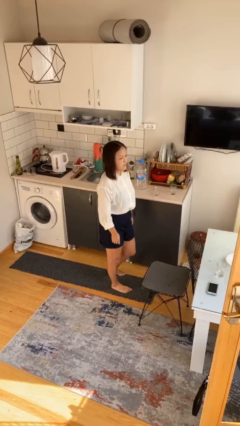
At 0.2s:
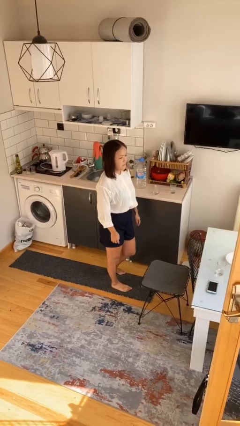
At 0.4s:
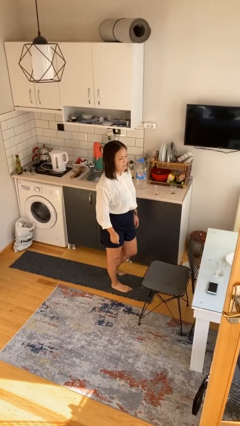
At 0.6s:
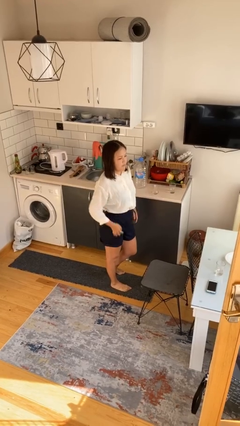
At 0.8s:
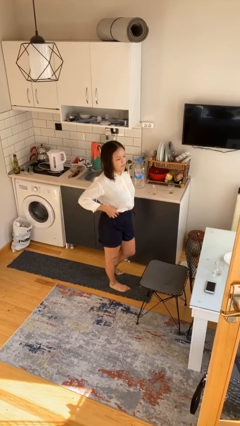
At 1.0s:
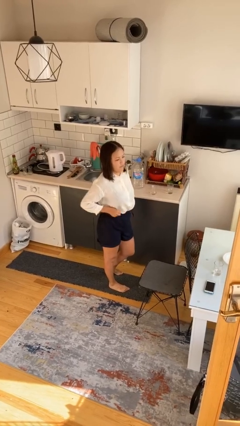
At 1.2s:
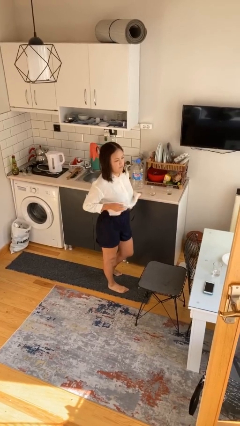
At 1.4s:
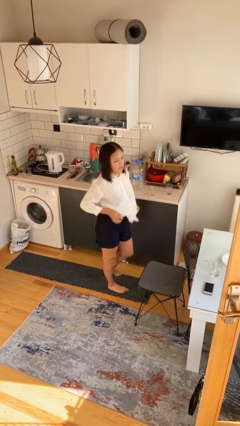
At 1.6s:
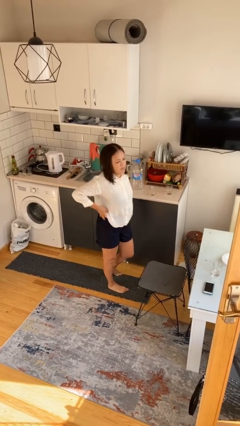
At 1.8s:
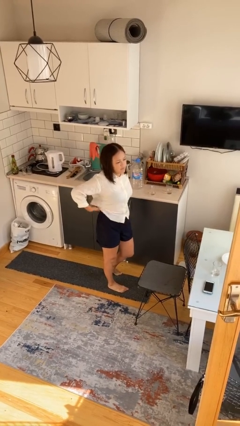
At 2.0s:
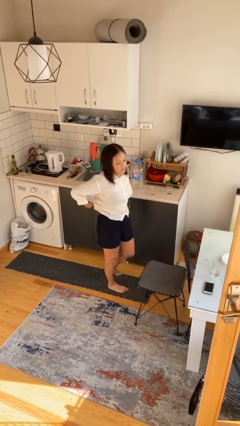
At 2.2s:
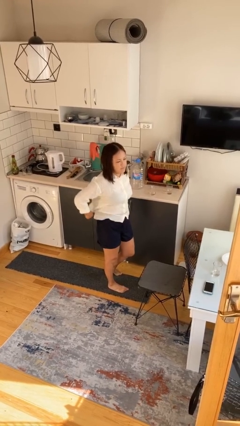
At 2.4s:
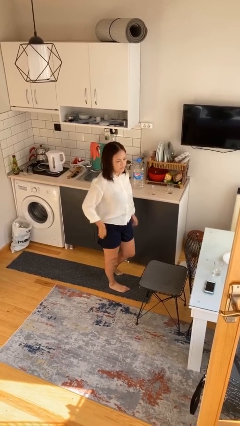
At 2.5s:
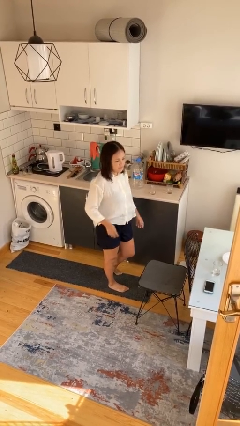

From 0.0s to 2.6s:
person untucks shirt

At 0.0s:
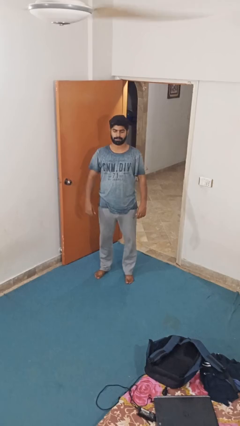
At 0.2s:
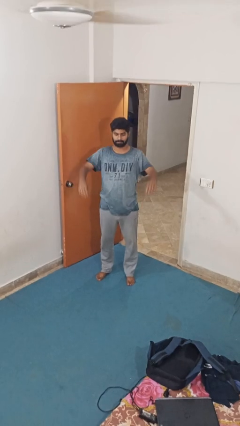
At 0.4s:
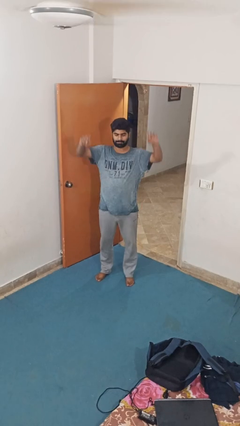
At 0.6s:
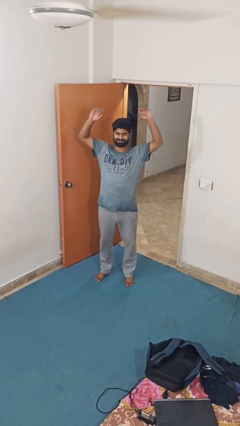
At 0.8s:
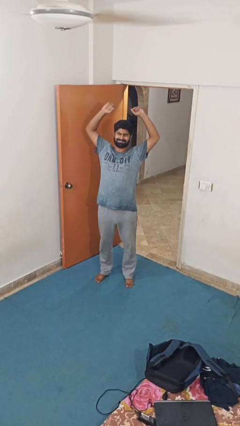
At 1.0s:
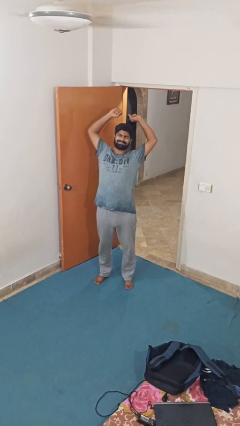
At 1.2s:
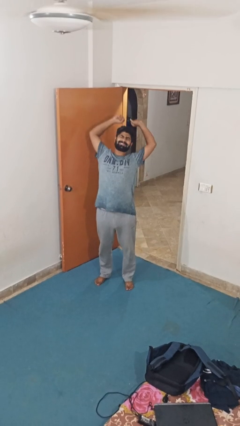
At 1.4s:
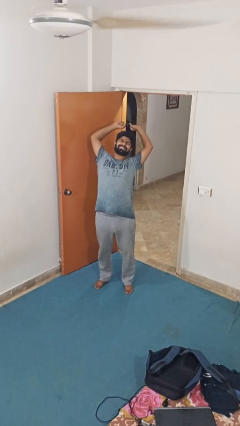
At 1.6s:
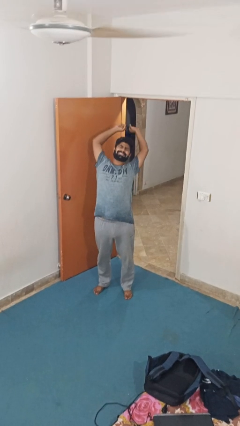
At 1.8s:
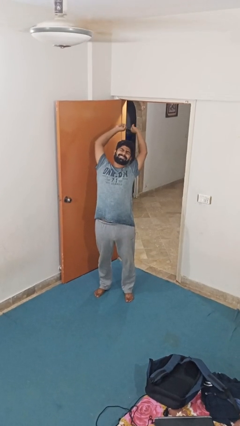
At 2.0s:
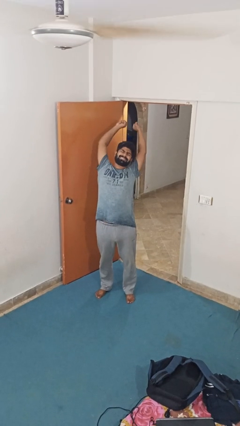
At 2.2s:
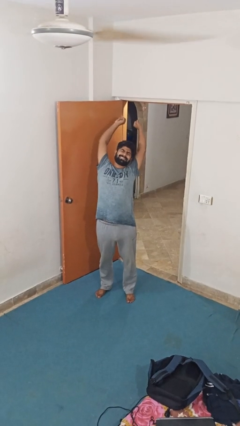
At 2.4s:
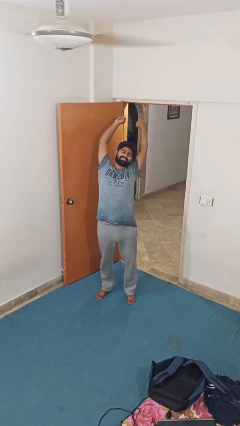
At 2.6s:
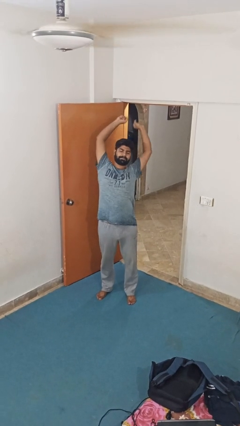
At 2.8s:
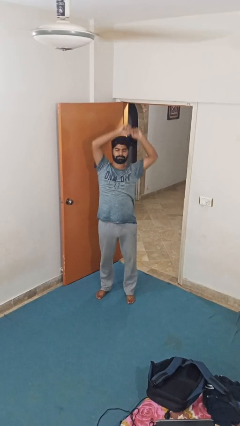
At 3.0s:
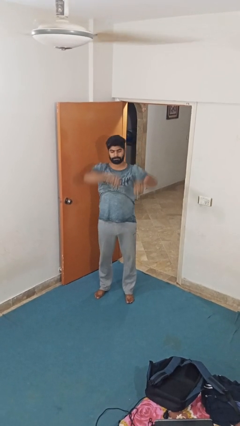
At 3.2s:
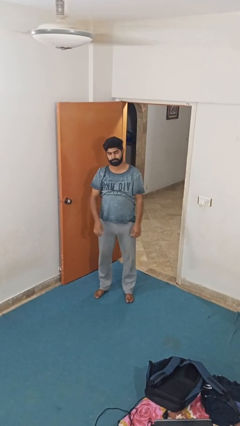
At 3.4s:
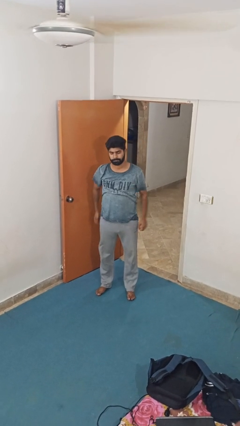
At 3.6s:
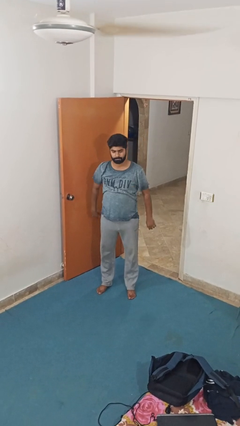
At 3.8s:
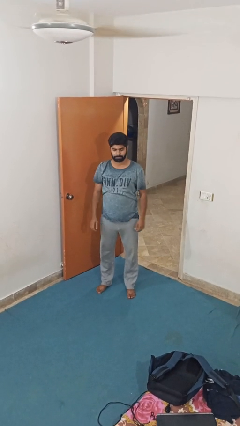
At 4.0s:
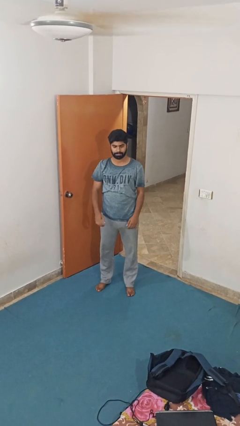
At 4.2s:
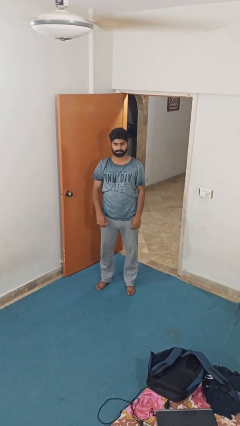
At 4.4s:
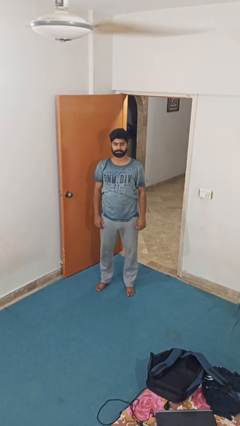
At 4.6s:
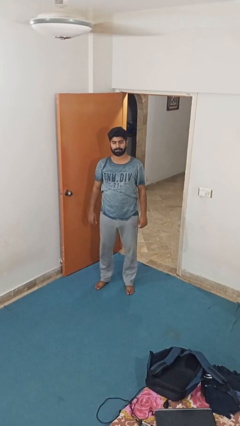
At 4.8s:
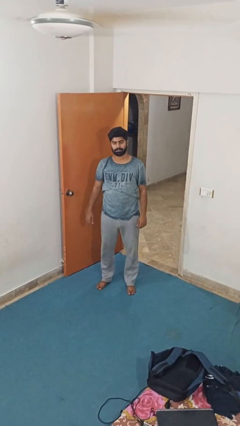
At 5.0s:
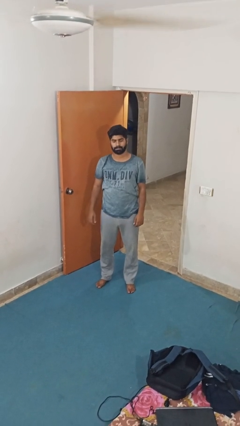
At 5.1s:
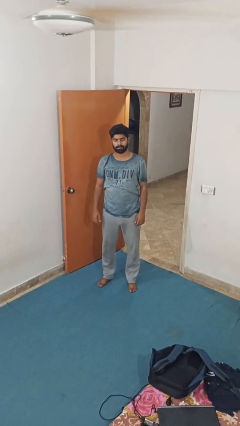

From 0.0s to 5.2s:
person stretches arms over head

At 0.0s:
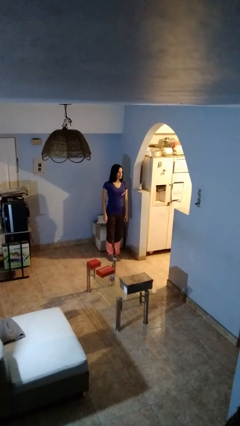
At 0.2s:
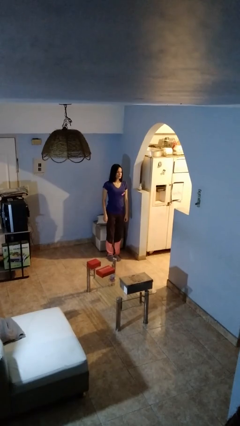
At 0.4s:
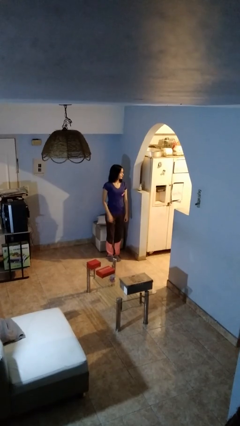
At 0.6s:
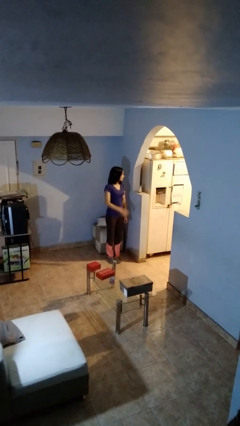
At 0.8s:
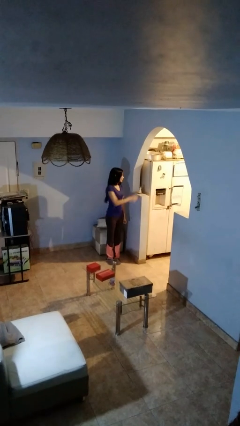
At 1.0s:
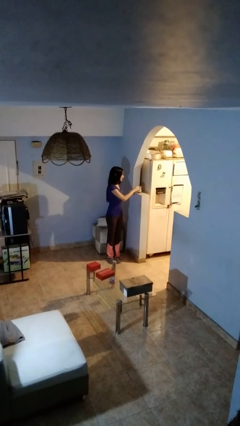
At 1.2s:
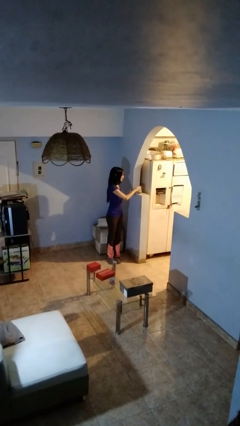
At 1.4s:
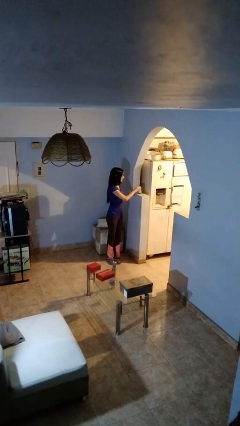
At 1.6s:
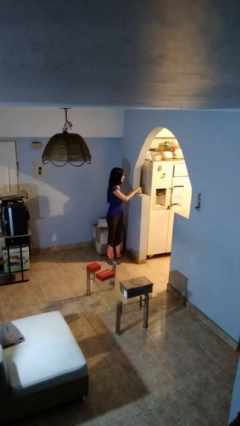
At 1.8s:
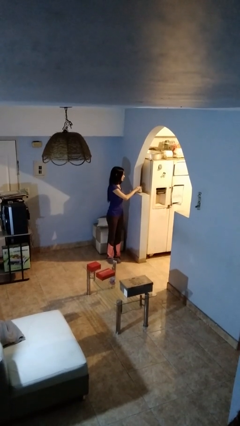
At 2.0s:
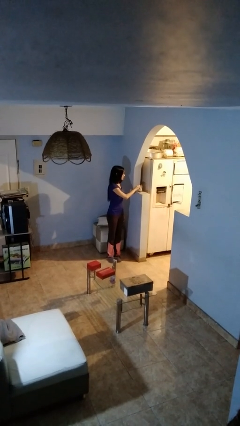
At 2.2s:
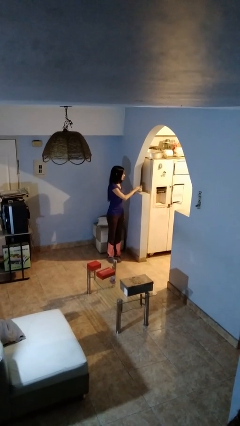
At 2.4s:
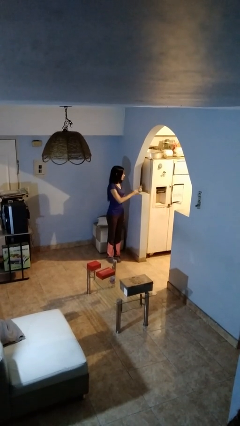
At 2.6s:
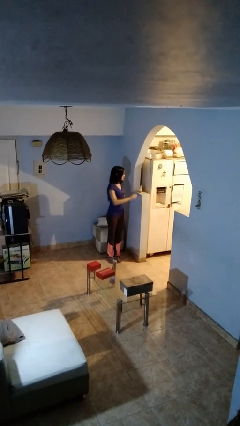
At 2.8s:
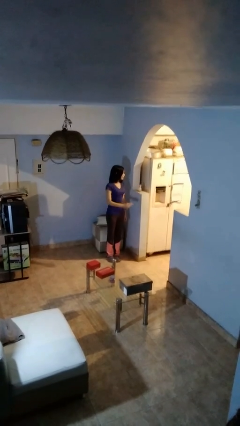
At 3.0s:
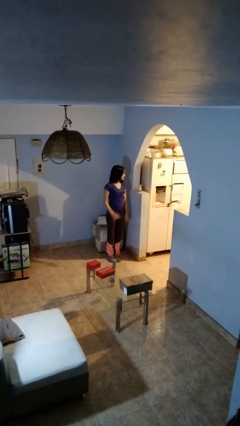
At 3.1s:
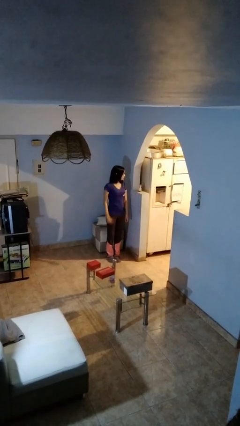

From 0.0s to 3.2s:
person taps object with finger

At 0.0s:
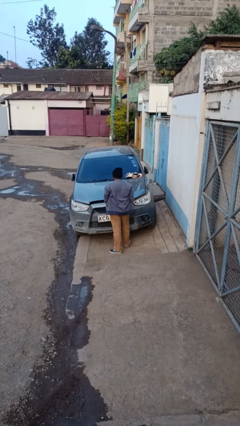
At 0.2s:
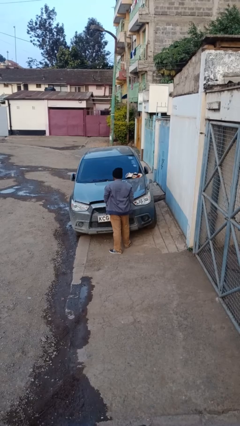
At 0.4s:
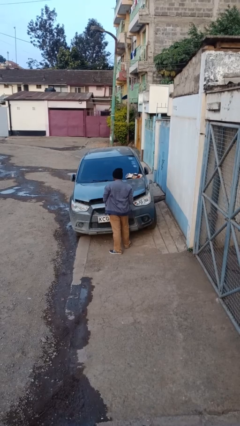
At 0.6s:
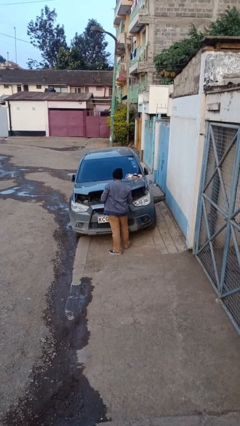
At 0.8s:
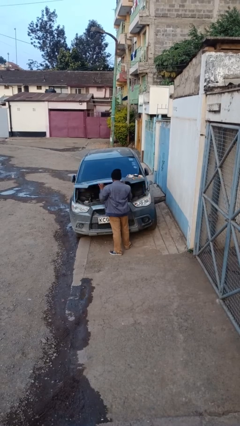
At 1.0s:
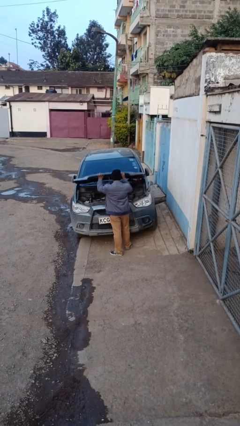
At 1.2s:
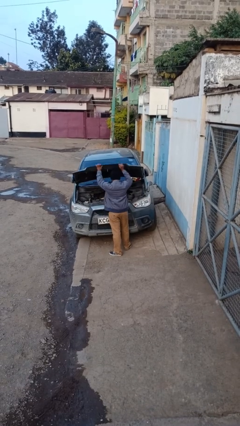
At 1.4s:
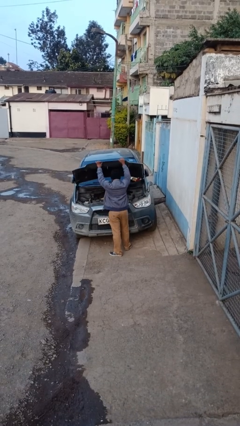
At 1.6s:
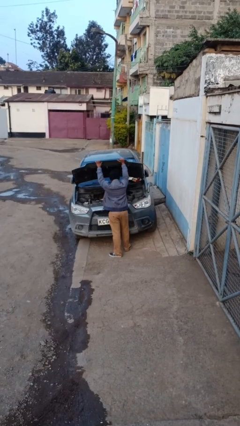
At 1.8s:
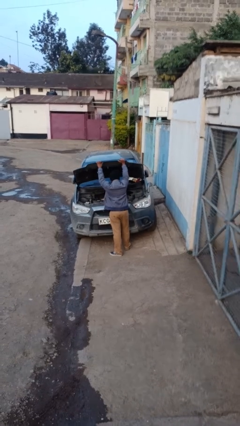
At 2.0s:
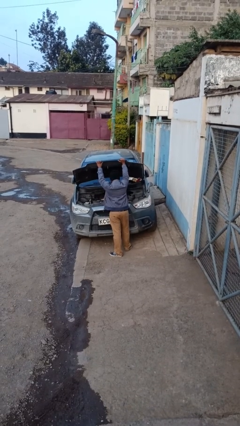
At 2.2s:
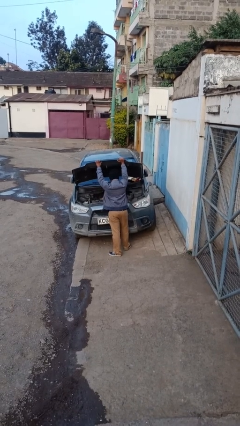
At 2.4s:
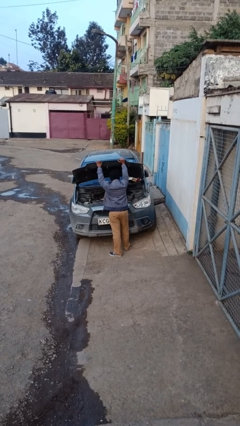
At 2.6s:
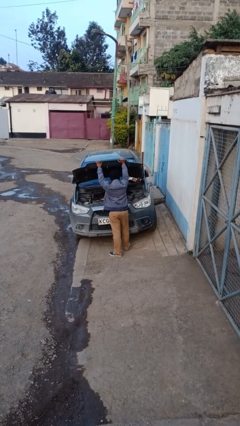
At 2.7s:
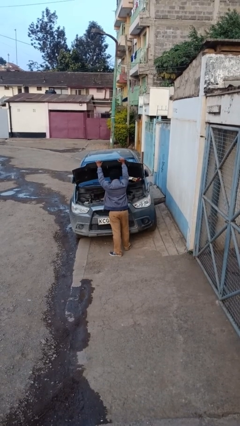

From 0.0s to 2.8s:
person opens car hood

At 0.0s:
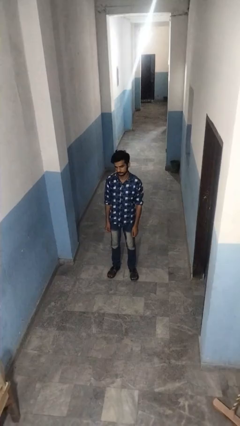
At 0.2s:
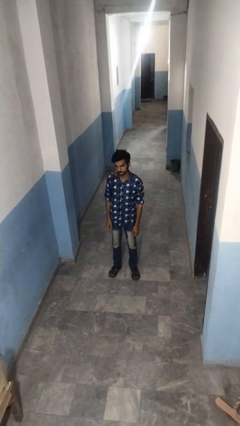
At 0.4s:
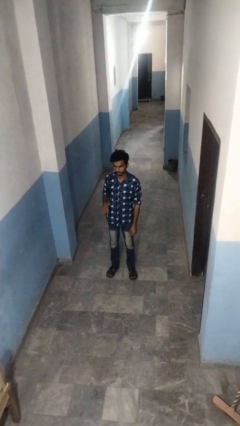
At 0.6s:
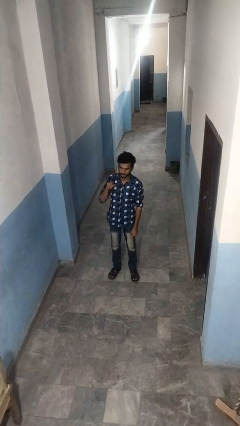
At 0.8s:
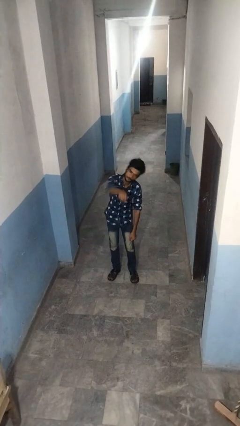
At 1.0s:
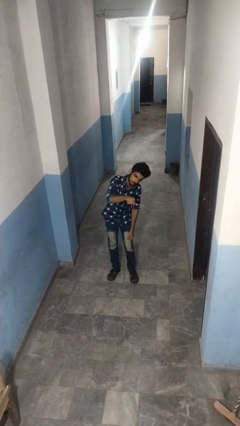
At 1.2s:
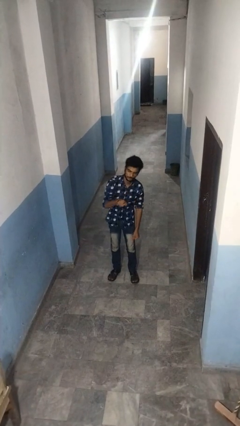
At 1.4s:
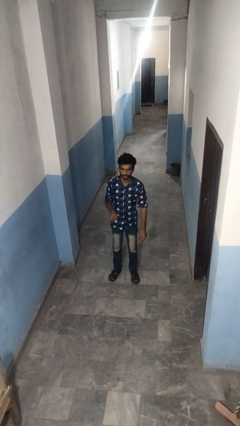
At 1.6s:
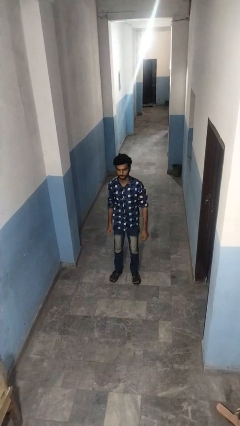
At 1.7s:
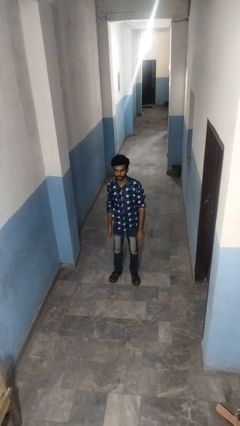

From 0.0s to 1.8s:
person punches

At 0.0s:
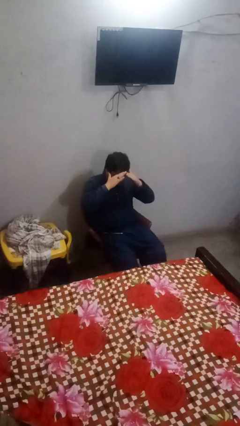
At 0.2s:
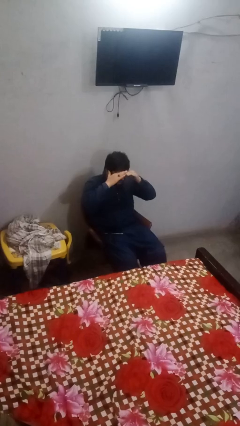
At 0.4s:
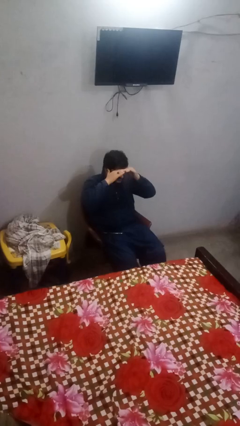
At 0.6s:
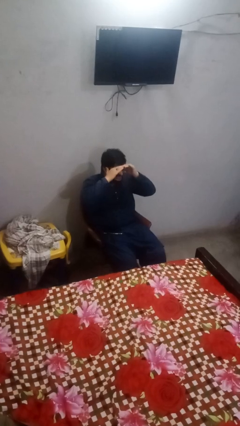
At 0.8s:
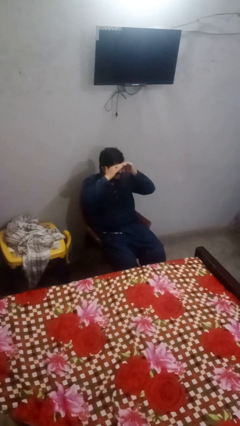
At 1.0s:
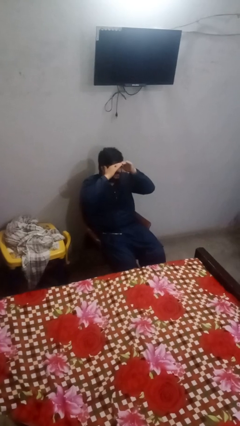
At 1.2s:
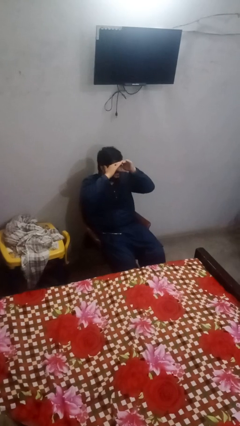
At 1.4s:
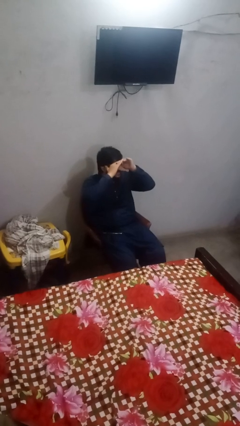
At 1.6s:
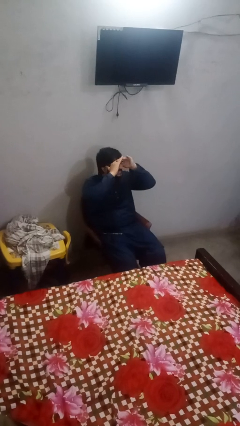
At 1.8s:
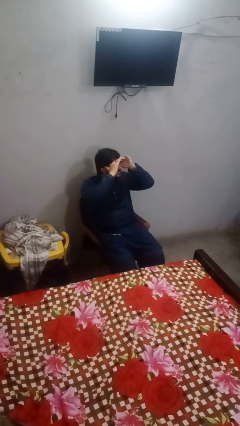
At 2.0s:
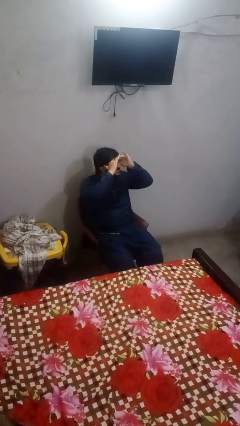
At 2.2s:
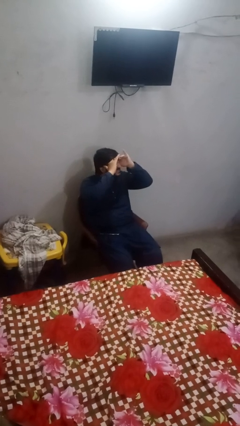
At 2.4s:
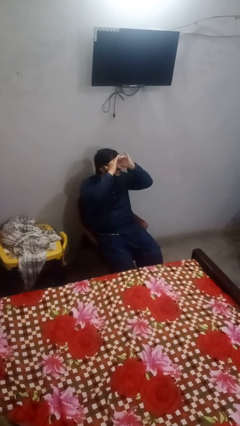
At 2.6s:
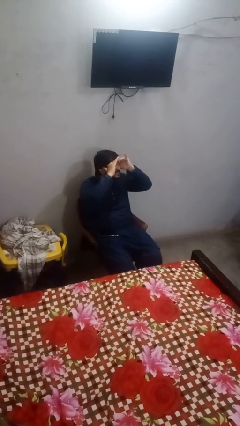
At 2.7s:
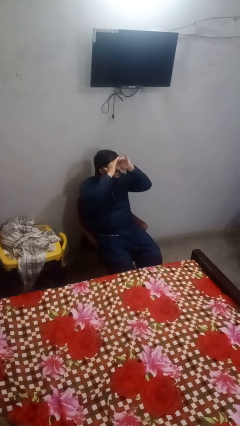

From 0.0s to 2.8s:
person shades eyes
